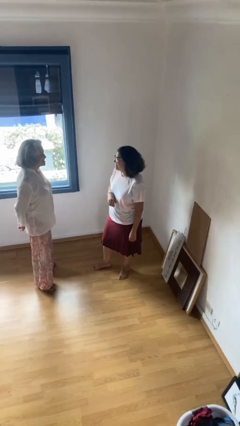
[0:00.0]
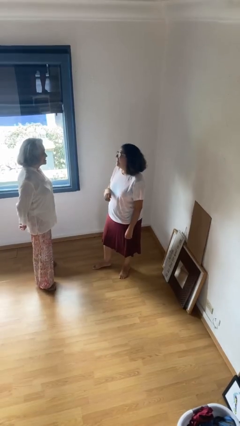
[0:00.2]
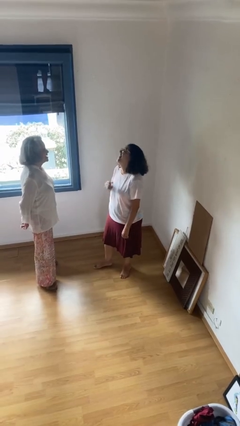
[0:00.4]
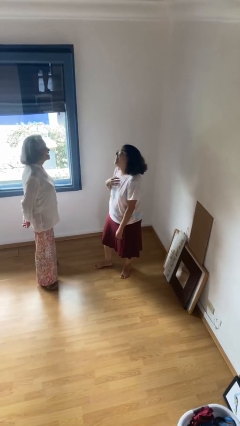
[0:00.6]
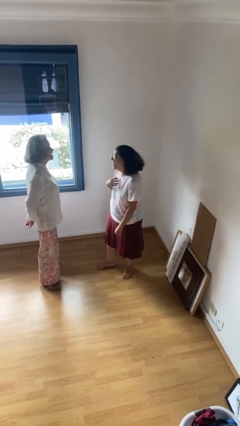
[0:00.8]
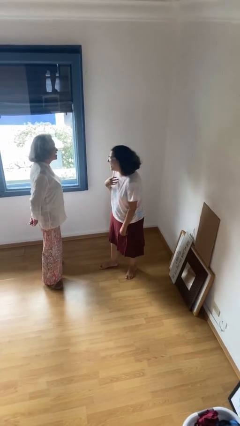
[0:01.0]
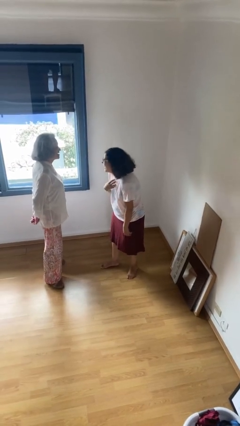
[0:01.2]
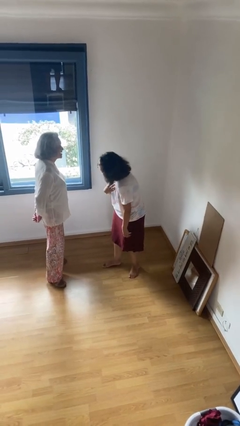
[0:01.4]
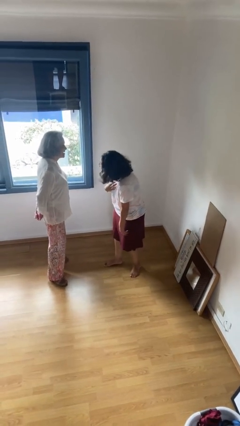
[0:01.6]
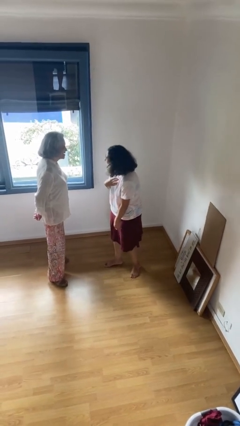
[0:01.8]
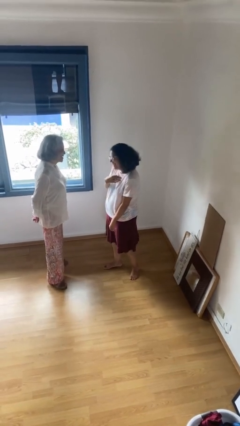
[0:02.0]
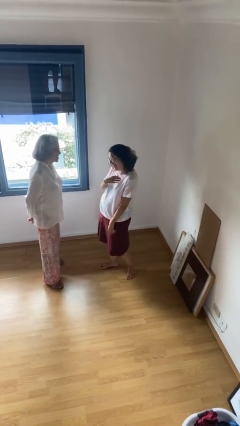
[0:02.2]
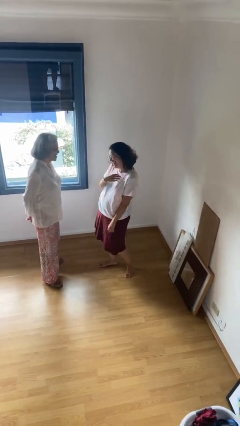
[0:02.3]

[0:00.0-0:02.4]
person laughs with person

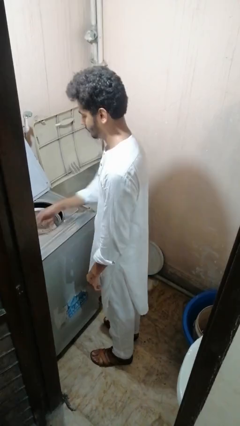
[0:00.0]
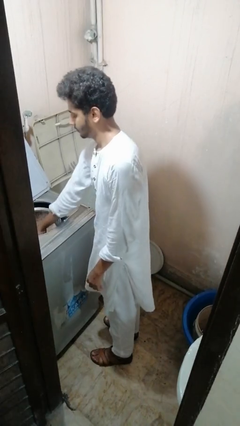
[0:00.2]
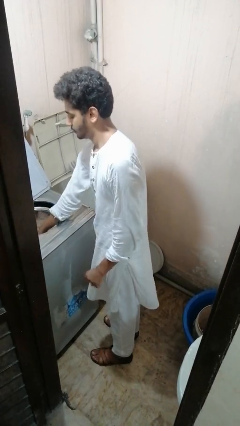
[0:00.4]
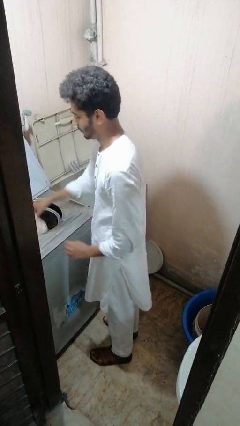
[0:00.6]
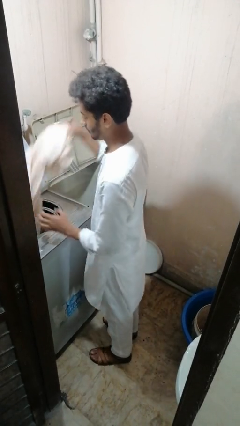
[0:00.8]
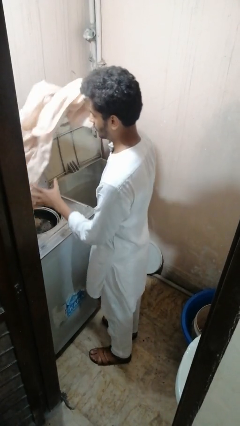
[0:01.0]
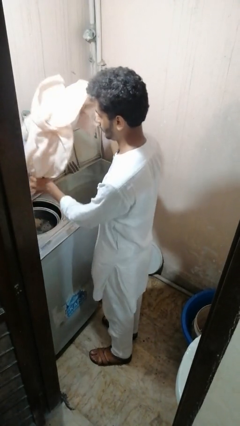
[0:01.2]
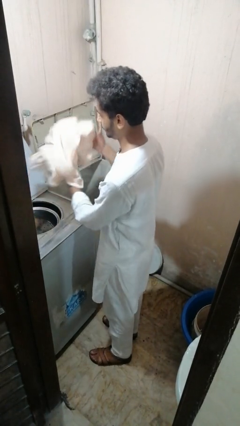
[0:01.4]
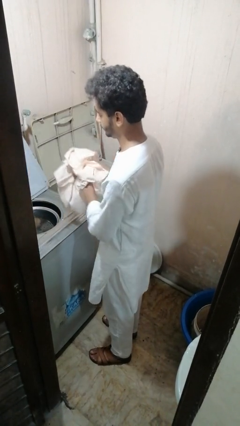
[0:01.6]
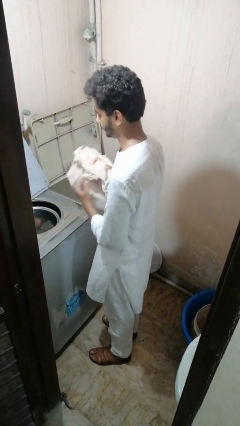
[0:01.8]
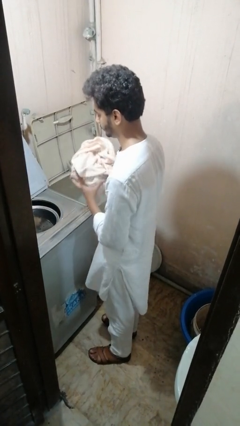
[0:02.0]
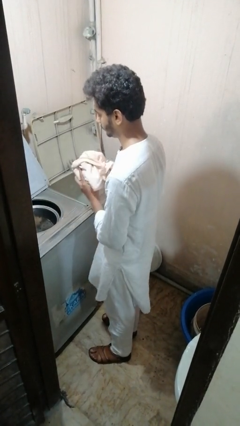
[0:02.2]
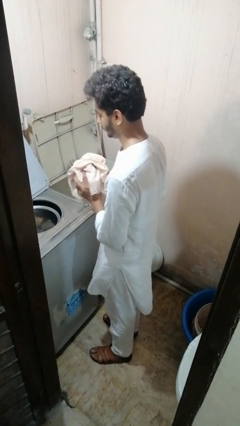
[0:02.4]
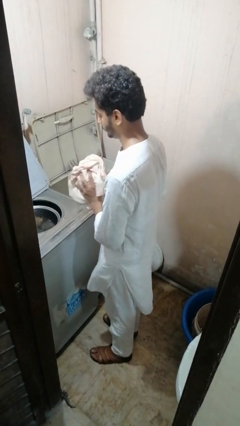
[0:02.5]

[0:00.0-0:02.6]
person unloads dryer

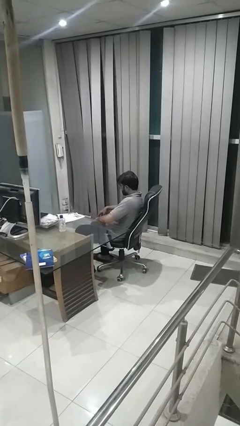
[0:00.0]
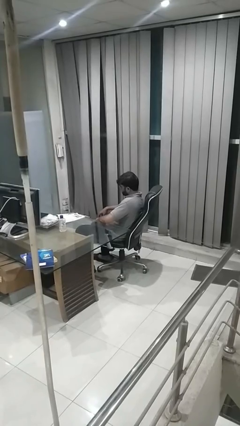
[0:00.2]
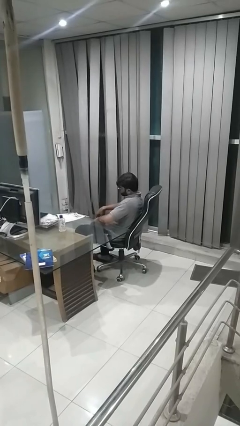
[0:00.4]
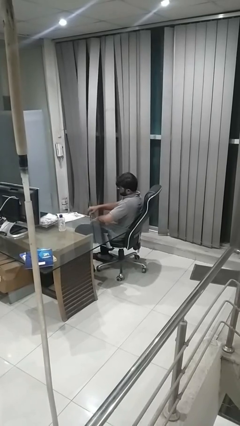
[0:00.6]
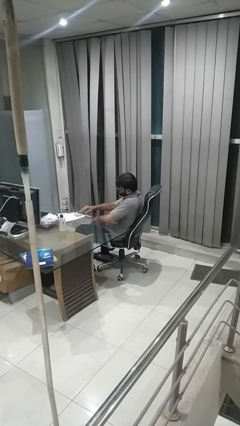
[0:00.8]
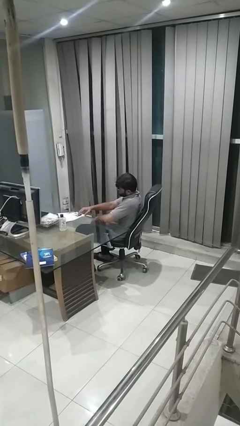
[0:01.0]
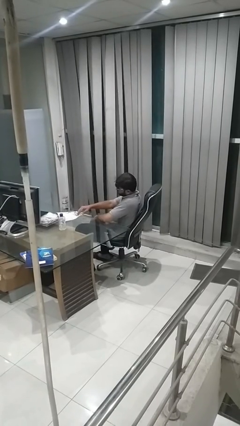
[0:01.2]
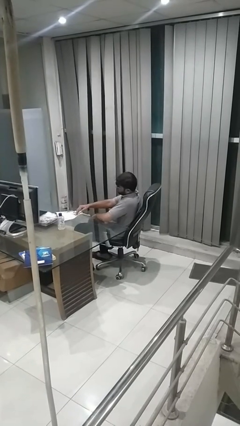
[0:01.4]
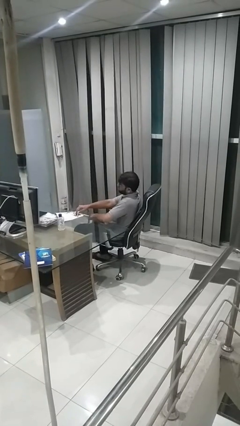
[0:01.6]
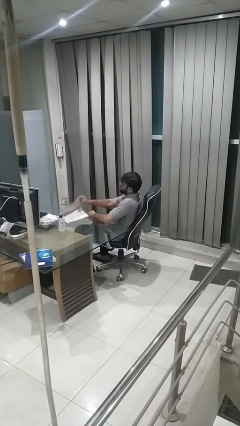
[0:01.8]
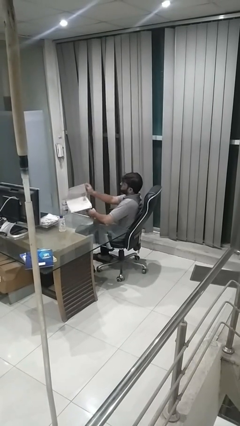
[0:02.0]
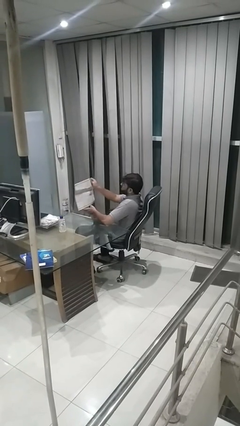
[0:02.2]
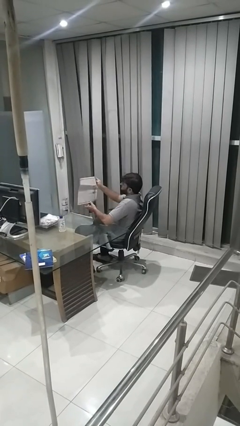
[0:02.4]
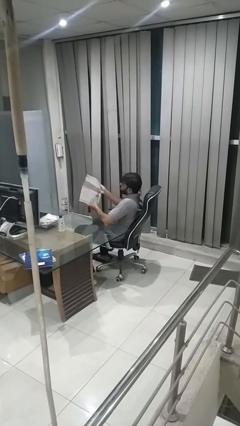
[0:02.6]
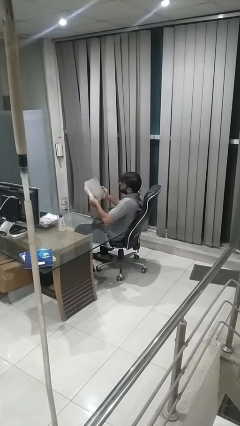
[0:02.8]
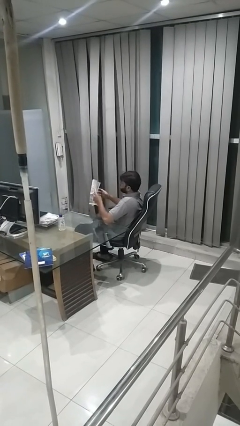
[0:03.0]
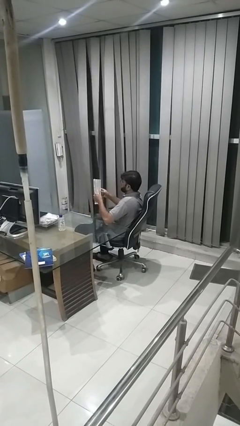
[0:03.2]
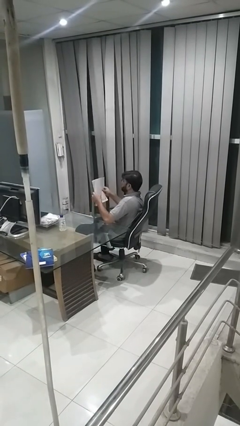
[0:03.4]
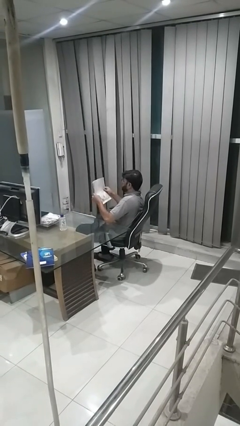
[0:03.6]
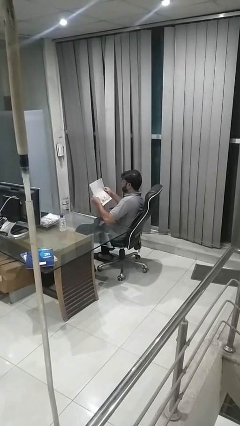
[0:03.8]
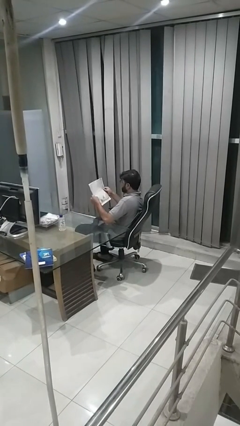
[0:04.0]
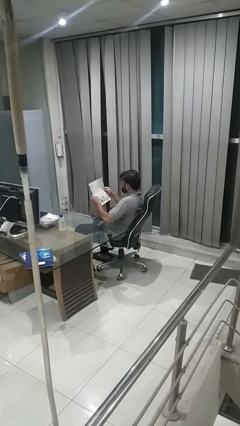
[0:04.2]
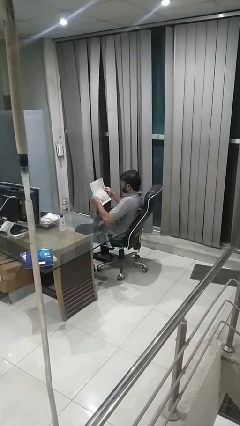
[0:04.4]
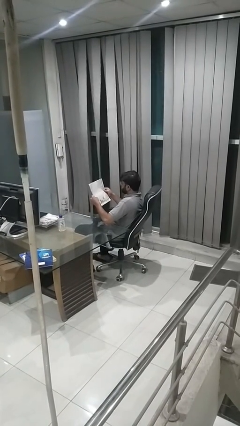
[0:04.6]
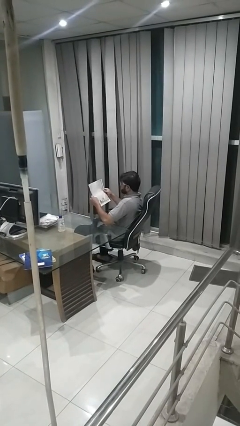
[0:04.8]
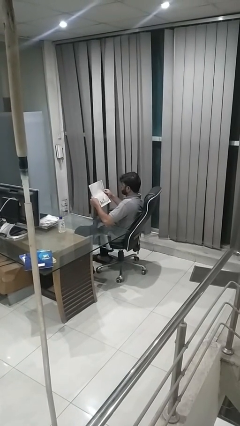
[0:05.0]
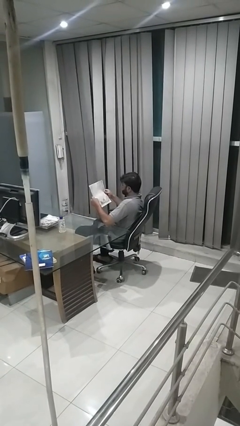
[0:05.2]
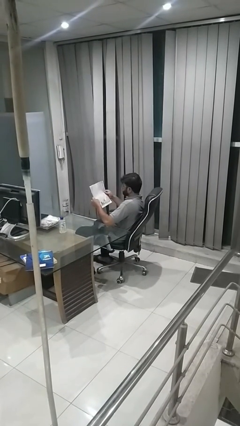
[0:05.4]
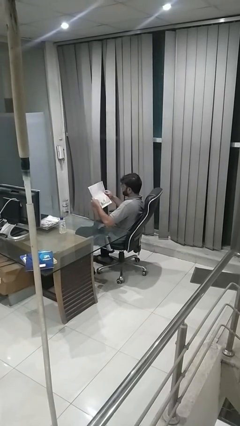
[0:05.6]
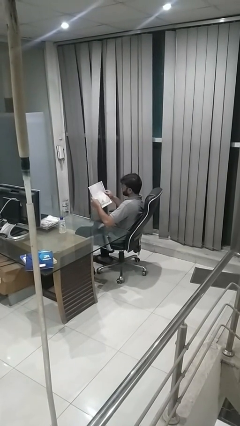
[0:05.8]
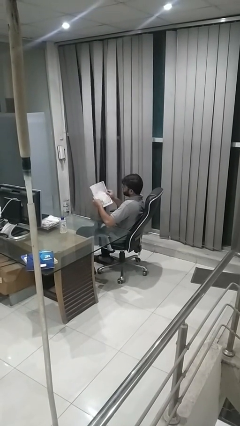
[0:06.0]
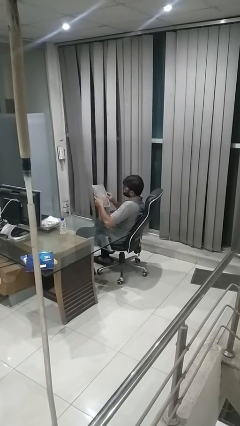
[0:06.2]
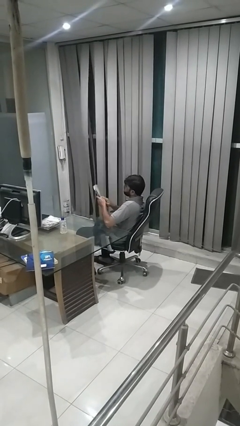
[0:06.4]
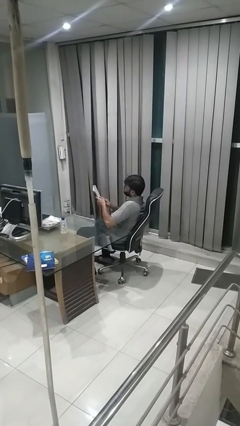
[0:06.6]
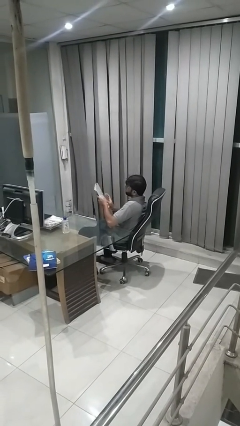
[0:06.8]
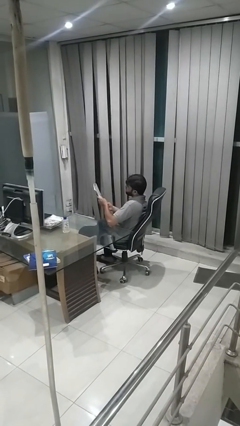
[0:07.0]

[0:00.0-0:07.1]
person reads newspaper

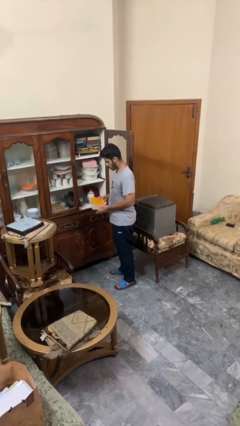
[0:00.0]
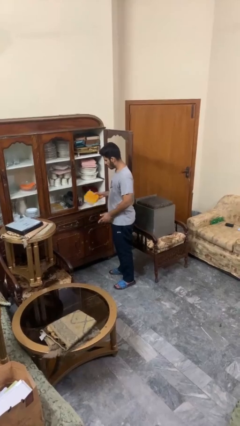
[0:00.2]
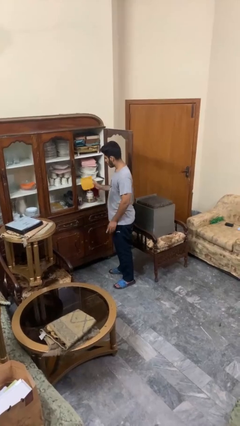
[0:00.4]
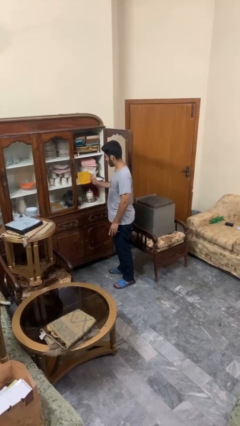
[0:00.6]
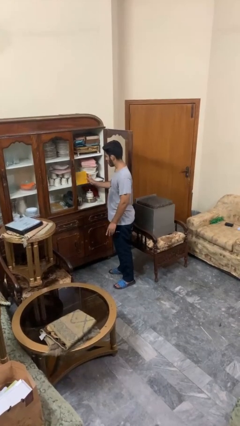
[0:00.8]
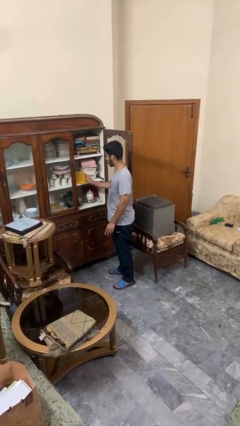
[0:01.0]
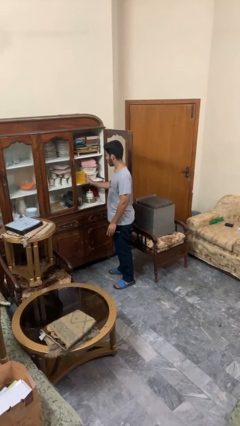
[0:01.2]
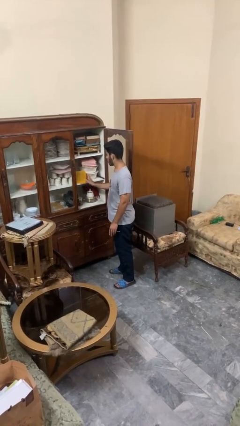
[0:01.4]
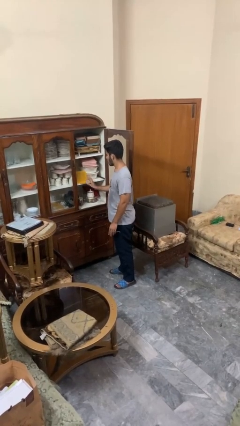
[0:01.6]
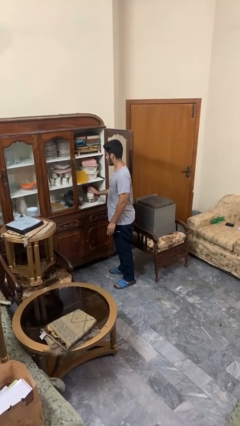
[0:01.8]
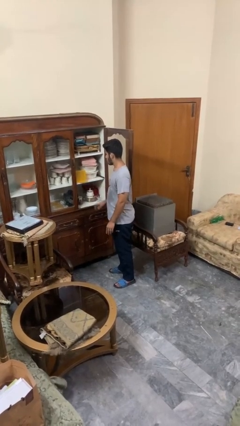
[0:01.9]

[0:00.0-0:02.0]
person puts down object into cabinet

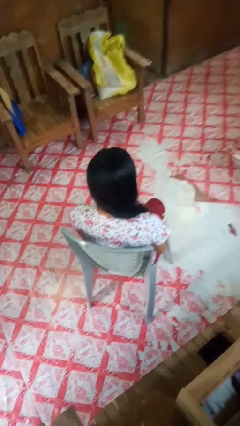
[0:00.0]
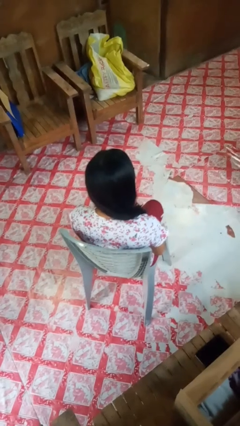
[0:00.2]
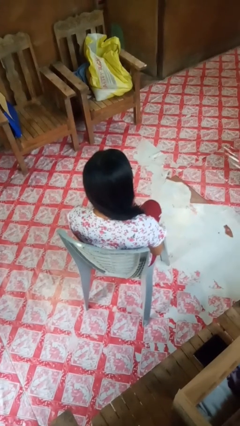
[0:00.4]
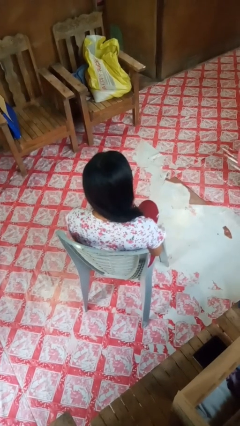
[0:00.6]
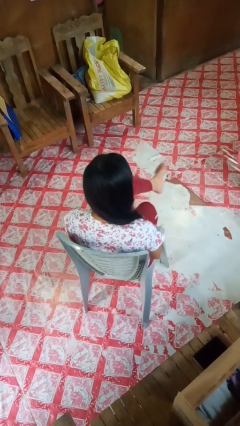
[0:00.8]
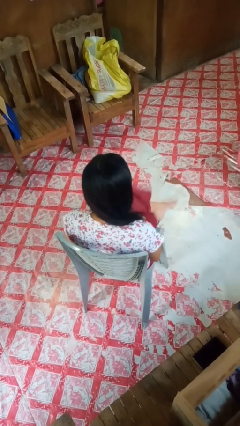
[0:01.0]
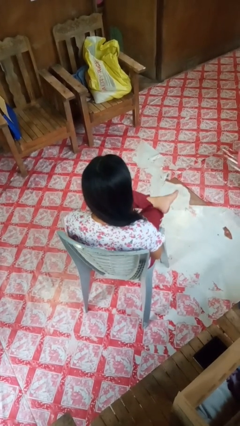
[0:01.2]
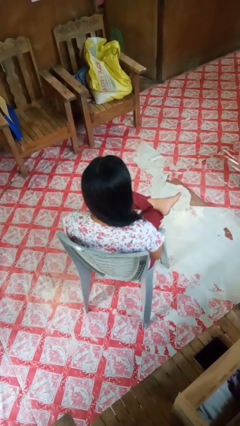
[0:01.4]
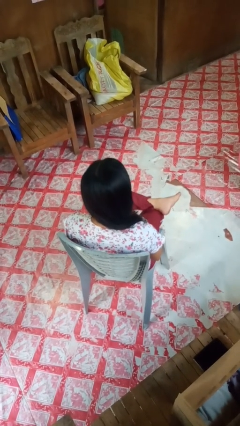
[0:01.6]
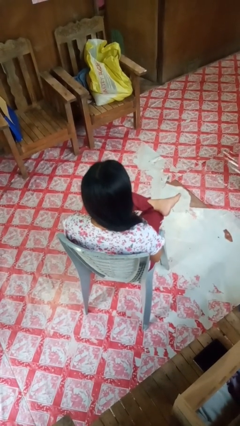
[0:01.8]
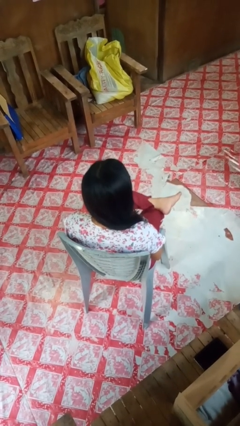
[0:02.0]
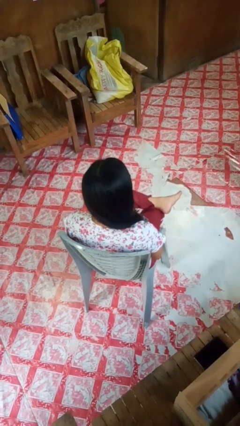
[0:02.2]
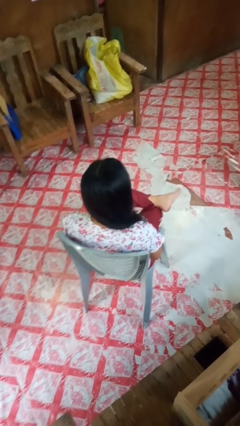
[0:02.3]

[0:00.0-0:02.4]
person crosses legs

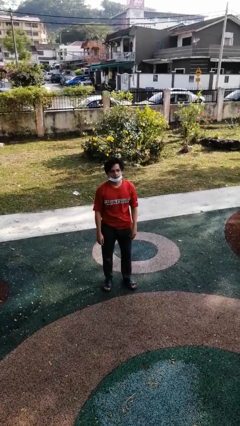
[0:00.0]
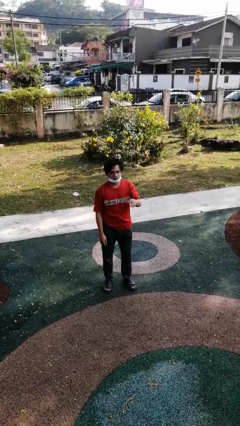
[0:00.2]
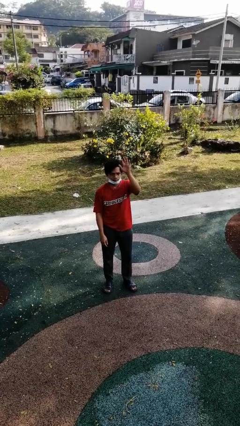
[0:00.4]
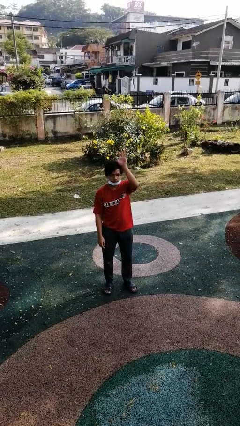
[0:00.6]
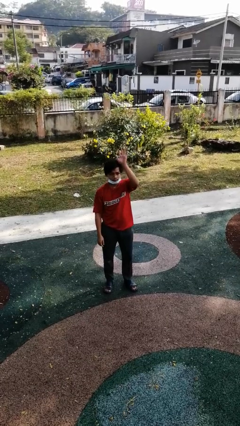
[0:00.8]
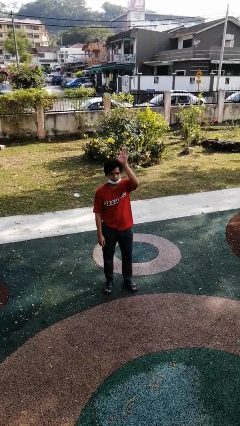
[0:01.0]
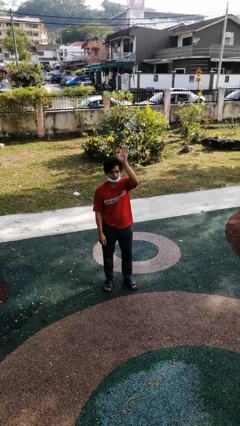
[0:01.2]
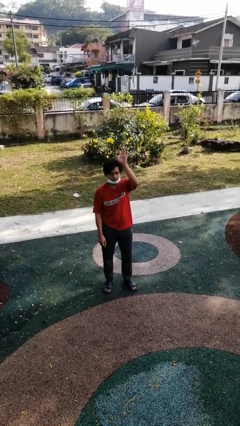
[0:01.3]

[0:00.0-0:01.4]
person gestures raise hand
